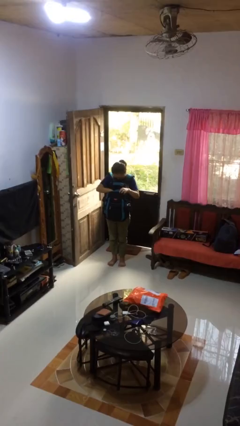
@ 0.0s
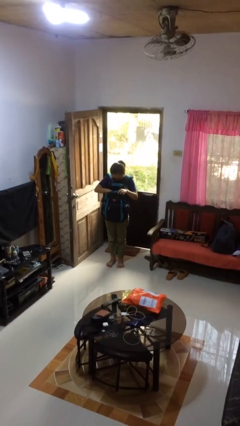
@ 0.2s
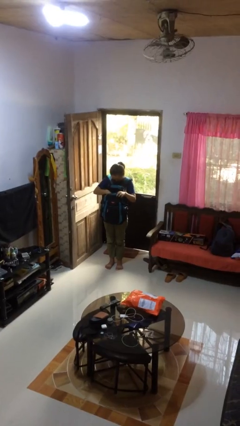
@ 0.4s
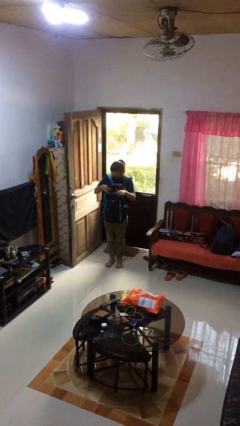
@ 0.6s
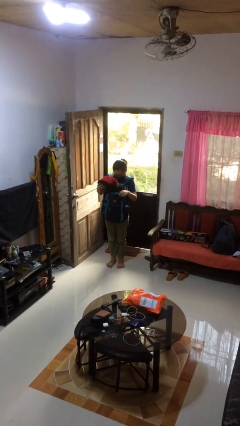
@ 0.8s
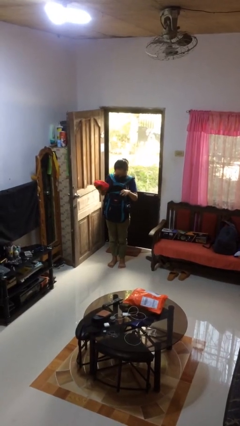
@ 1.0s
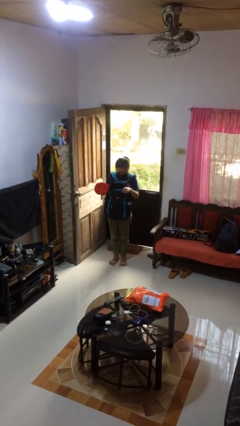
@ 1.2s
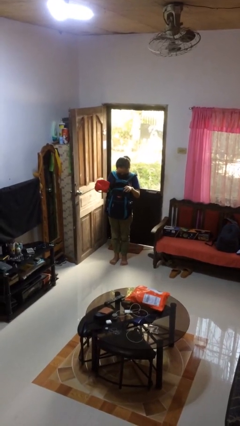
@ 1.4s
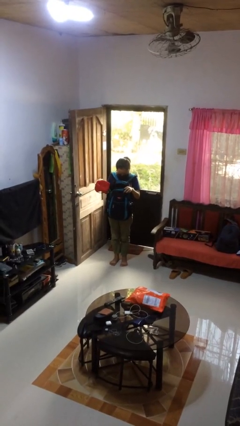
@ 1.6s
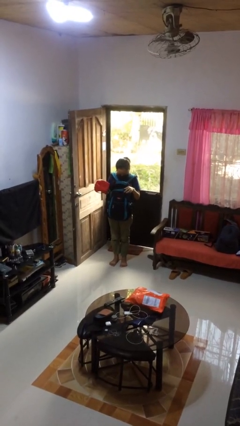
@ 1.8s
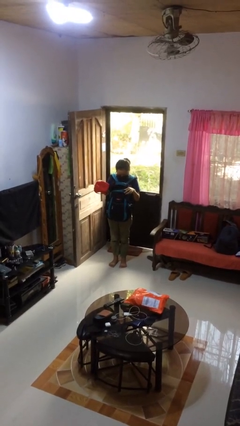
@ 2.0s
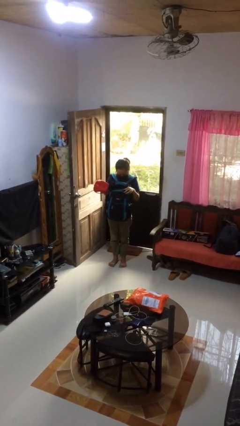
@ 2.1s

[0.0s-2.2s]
person takes object from backpack

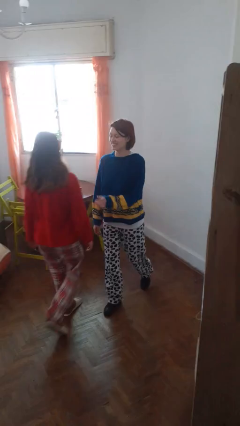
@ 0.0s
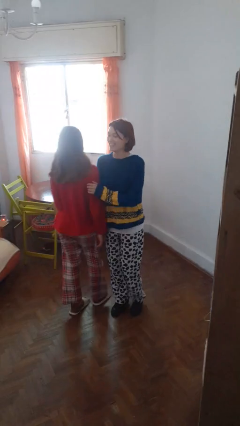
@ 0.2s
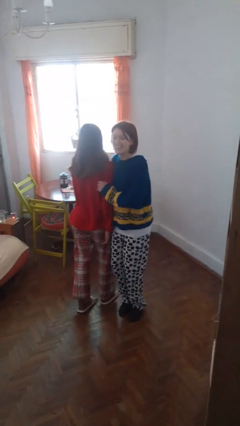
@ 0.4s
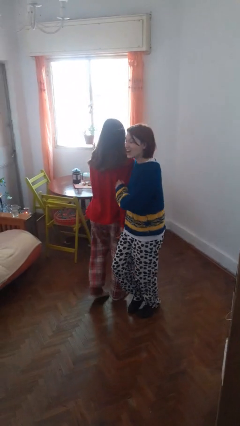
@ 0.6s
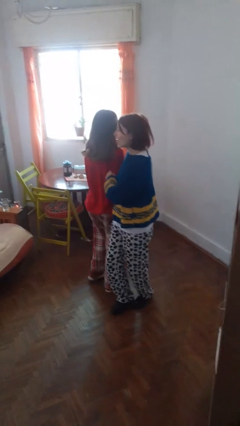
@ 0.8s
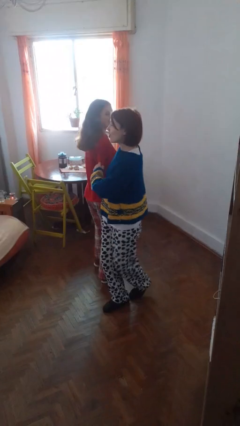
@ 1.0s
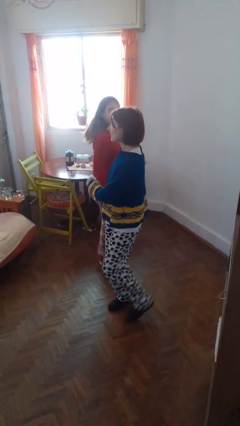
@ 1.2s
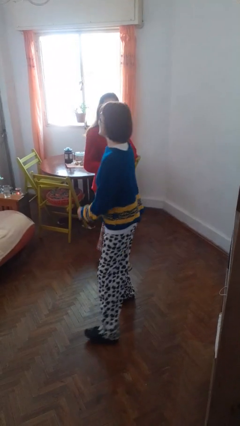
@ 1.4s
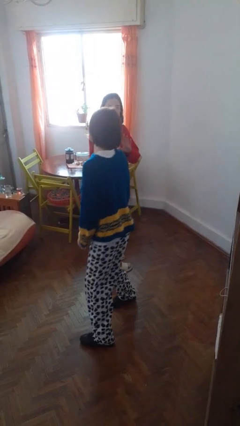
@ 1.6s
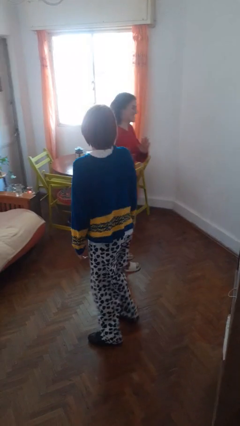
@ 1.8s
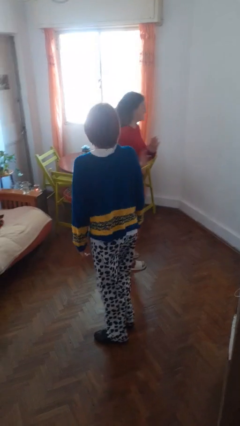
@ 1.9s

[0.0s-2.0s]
person bumps into person

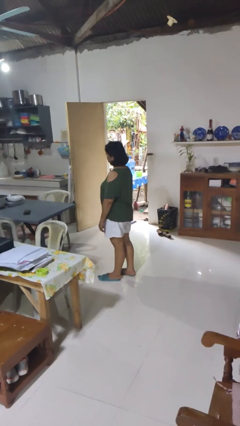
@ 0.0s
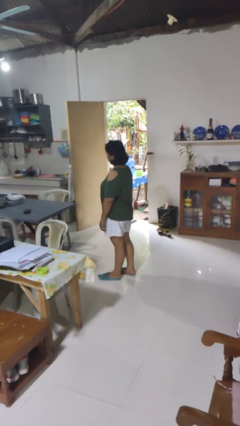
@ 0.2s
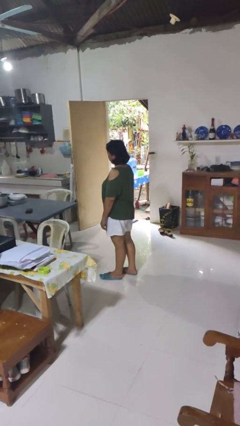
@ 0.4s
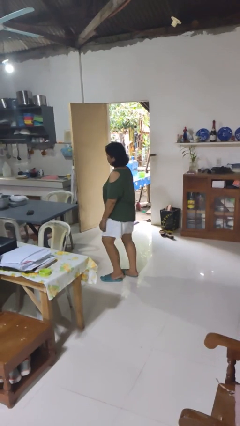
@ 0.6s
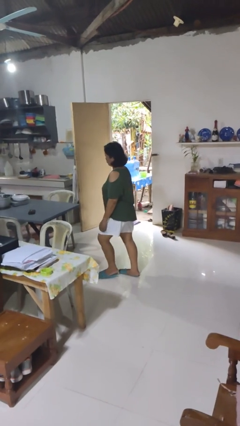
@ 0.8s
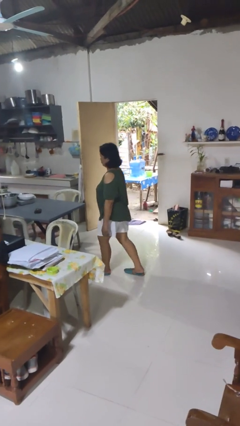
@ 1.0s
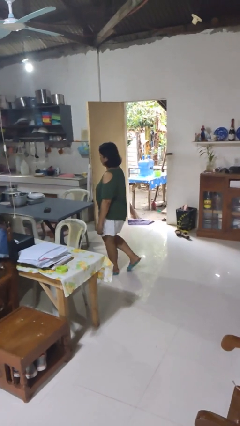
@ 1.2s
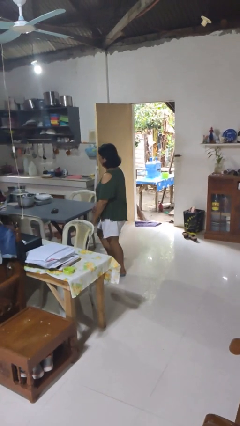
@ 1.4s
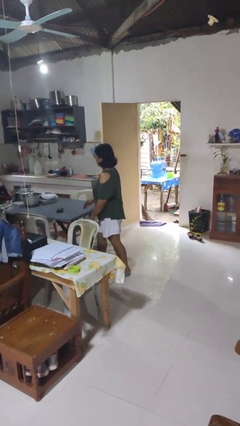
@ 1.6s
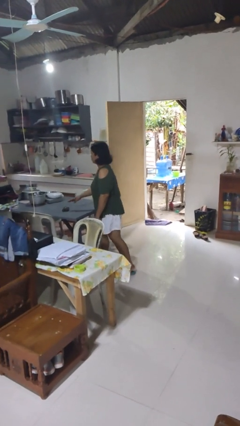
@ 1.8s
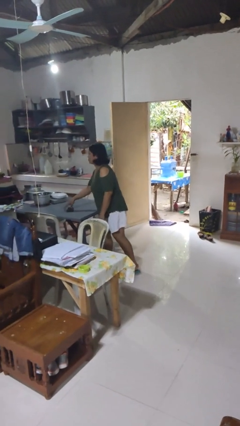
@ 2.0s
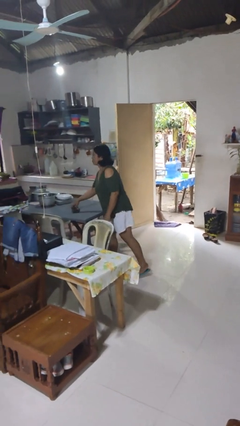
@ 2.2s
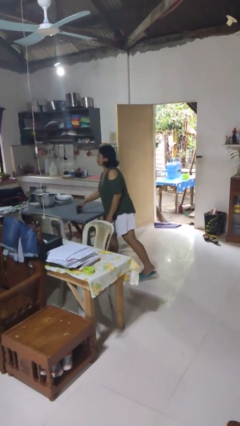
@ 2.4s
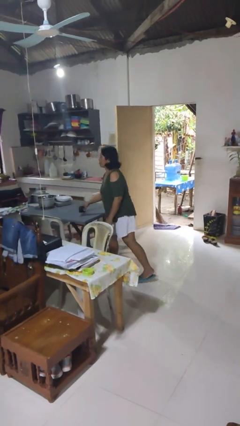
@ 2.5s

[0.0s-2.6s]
person picks up object from table

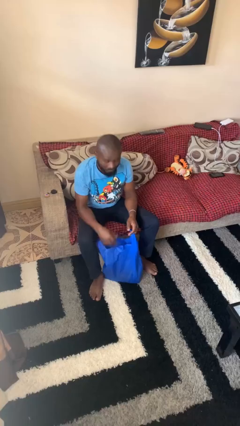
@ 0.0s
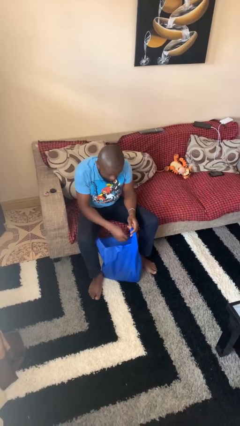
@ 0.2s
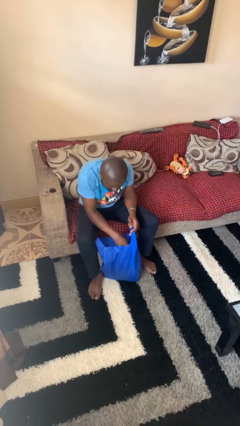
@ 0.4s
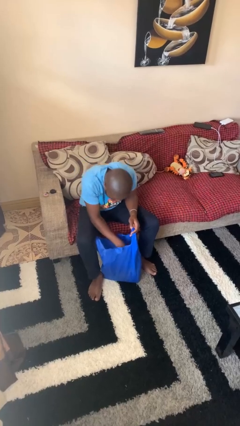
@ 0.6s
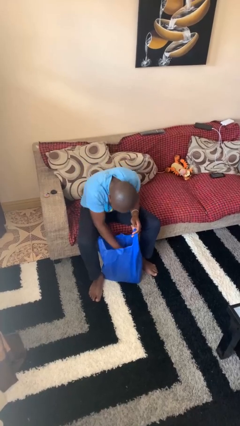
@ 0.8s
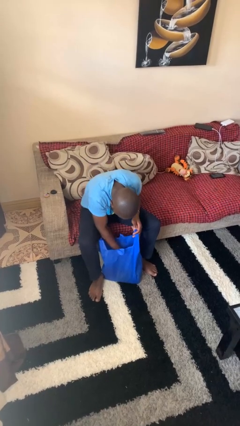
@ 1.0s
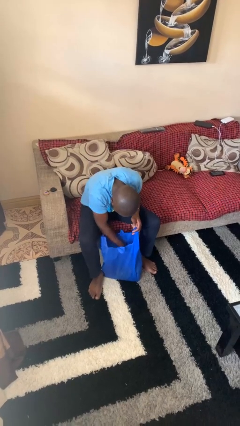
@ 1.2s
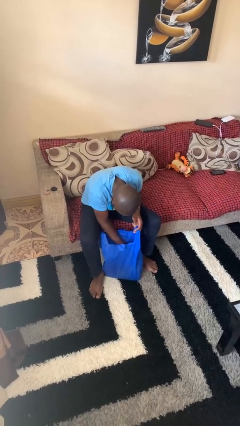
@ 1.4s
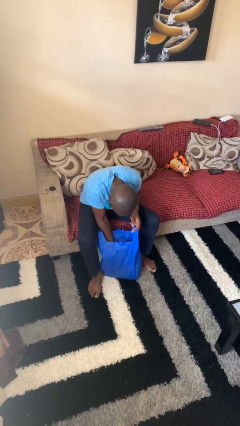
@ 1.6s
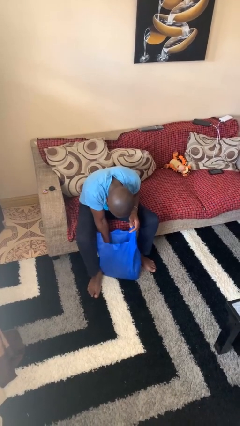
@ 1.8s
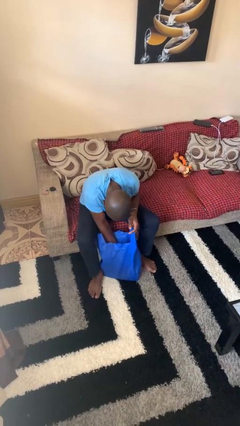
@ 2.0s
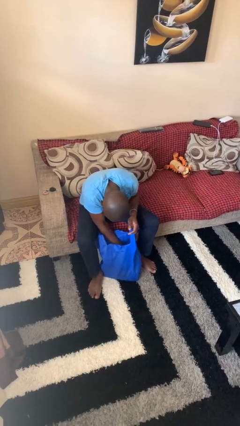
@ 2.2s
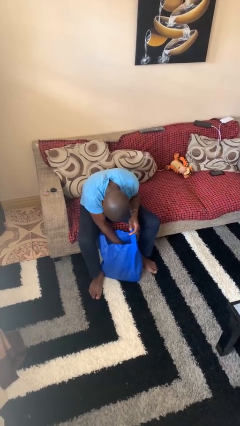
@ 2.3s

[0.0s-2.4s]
person searches in bag

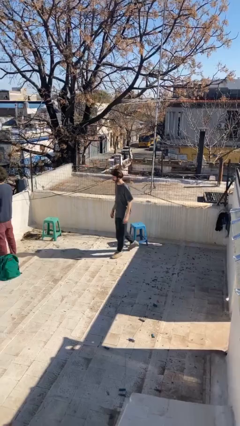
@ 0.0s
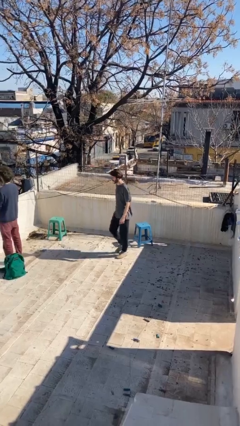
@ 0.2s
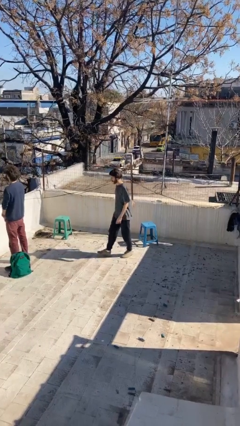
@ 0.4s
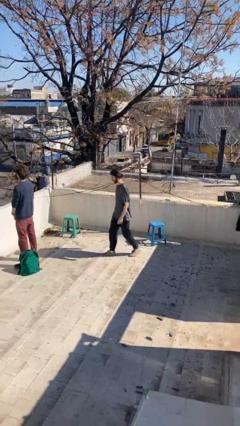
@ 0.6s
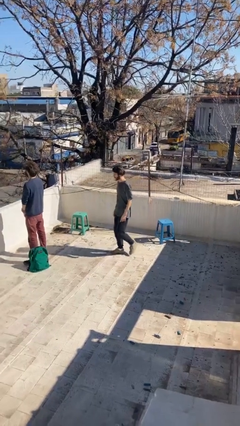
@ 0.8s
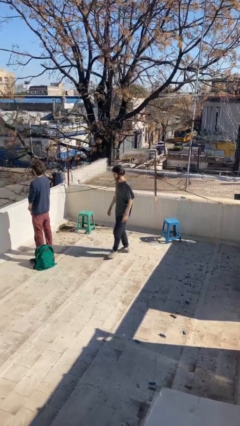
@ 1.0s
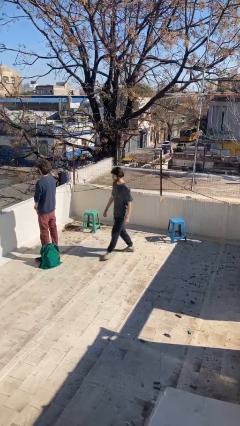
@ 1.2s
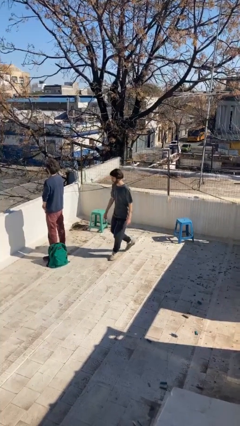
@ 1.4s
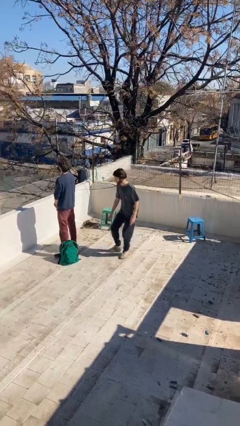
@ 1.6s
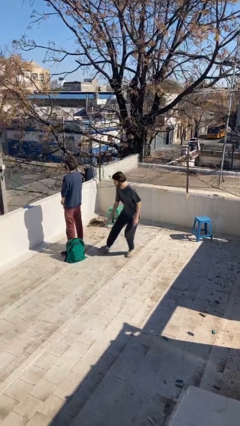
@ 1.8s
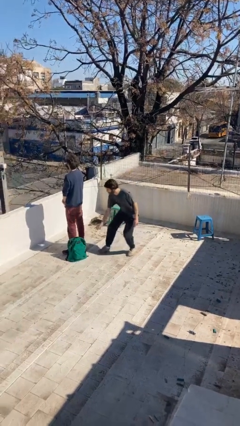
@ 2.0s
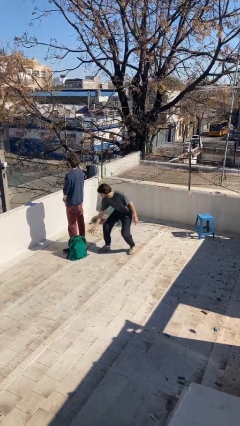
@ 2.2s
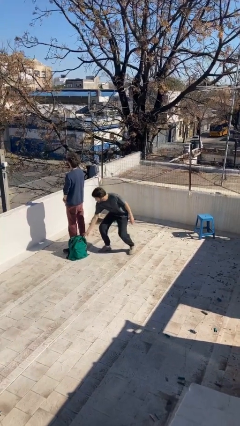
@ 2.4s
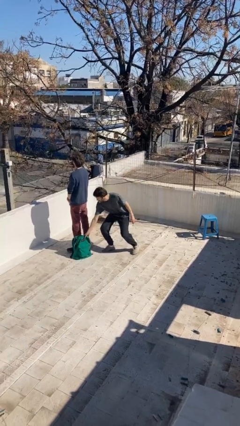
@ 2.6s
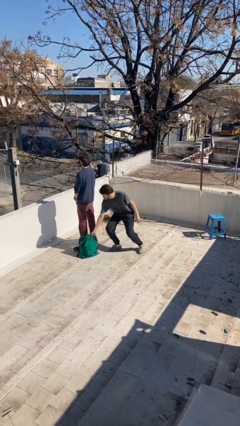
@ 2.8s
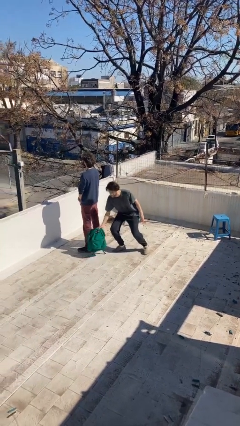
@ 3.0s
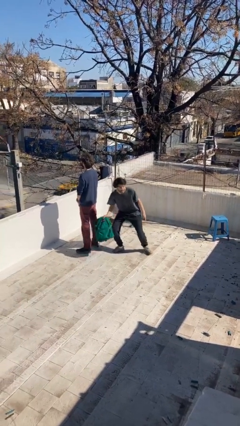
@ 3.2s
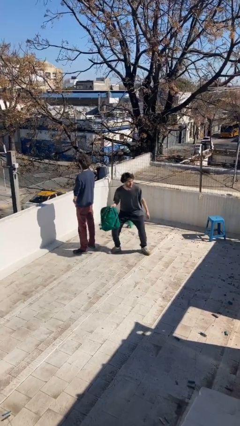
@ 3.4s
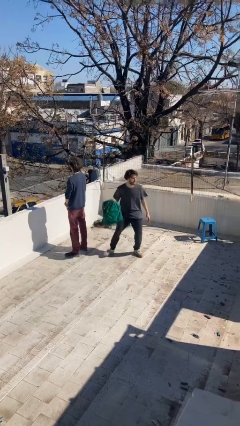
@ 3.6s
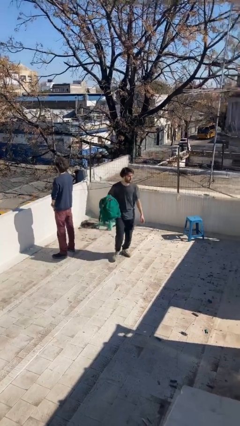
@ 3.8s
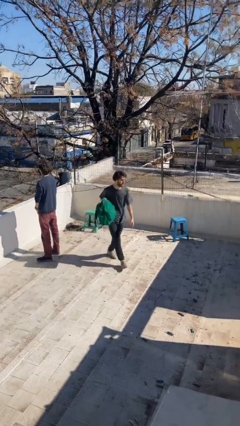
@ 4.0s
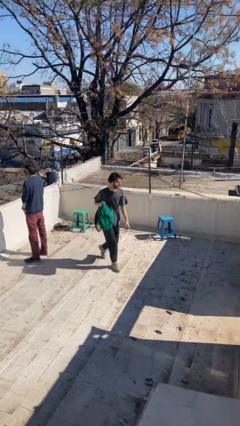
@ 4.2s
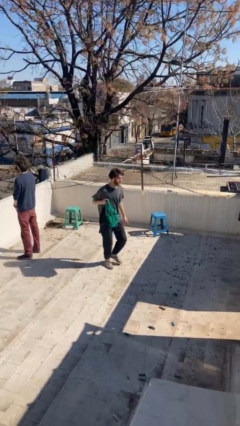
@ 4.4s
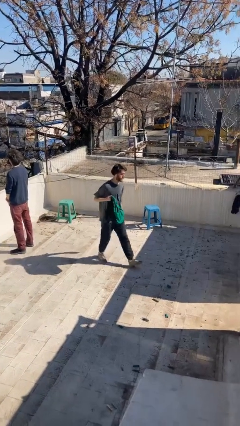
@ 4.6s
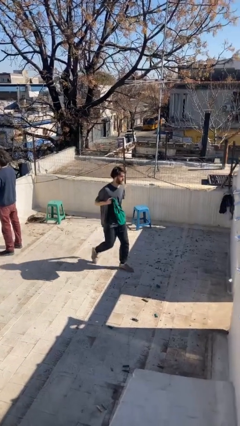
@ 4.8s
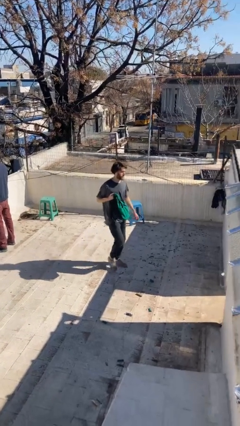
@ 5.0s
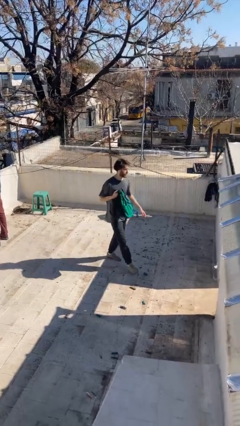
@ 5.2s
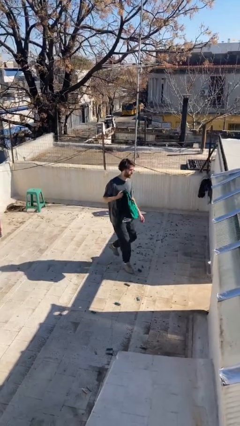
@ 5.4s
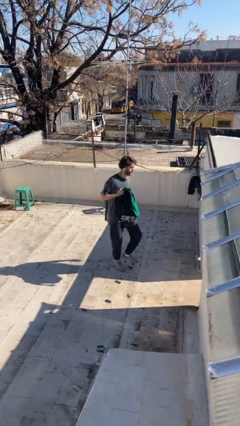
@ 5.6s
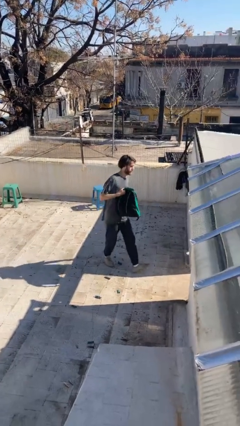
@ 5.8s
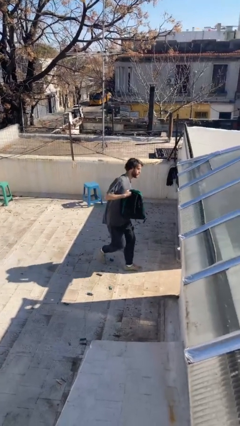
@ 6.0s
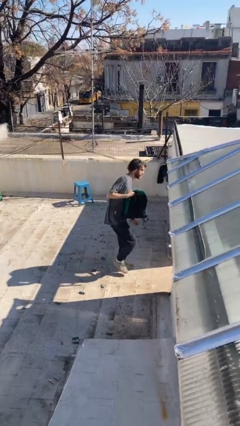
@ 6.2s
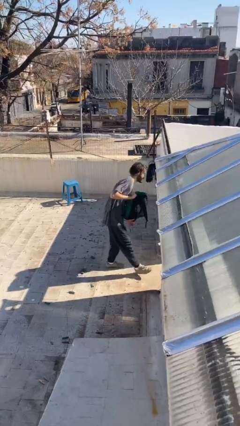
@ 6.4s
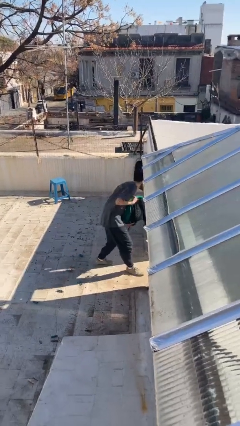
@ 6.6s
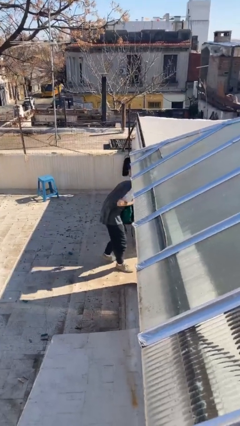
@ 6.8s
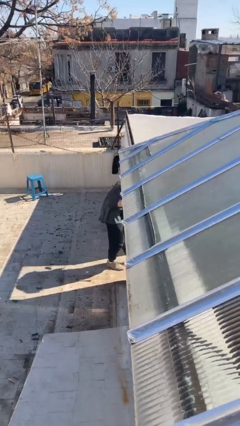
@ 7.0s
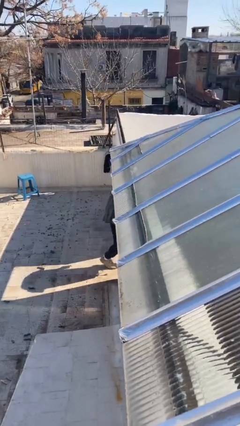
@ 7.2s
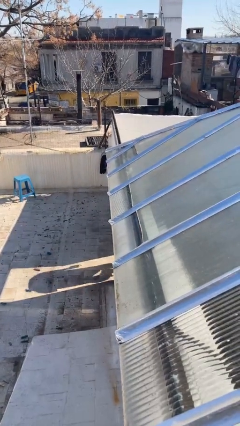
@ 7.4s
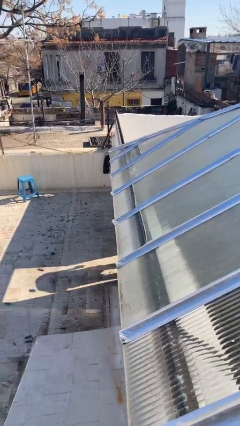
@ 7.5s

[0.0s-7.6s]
person steals object from person

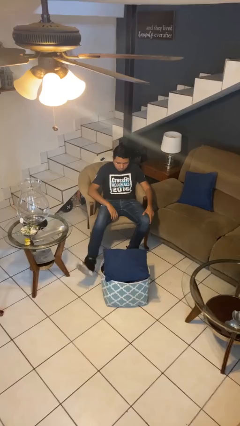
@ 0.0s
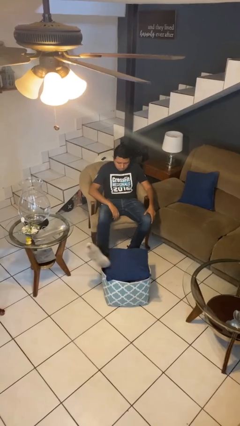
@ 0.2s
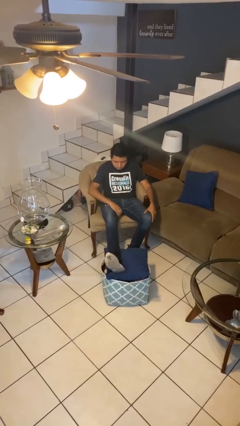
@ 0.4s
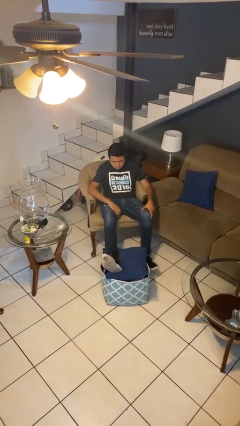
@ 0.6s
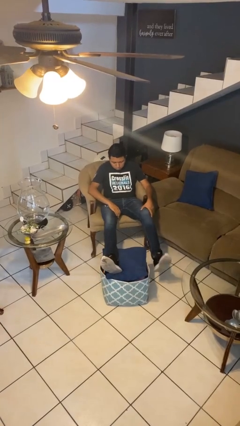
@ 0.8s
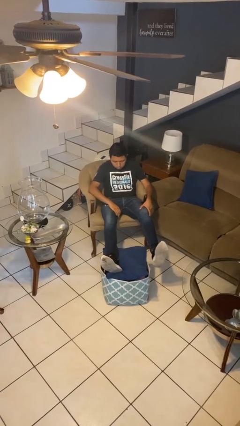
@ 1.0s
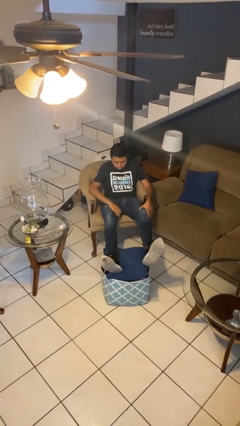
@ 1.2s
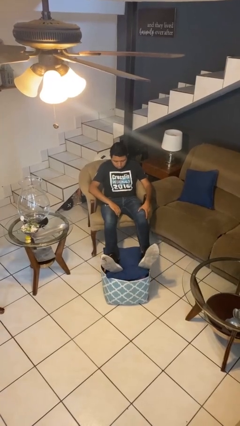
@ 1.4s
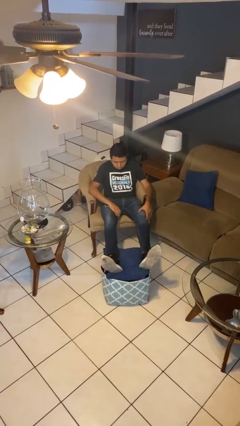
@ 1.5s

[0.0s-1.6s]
person puts feet up
